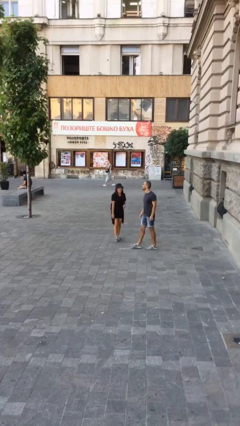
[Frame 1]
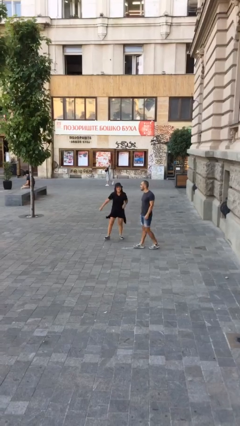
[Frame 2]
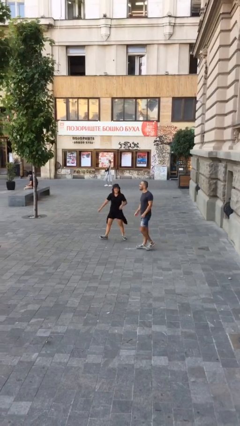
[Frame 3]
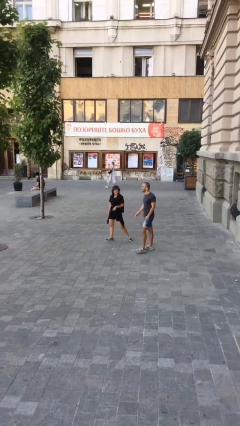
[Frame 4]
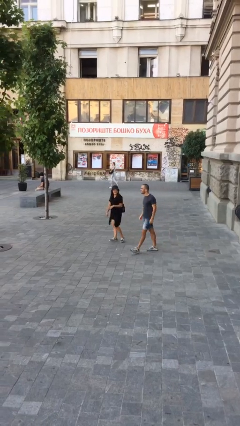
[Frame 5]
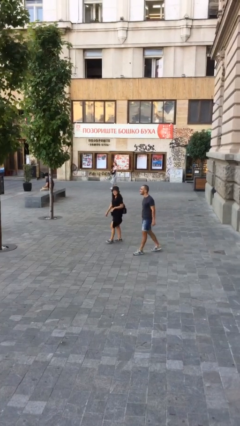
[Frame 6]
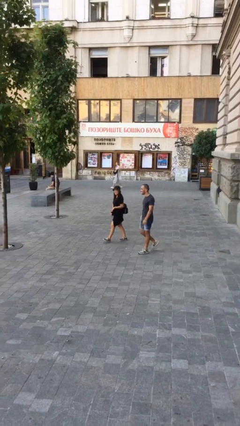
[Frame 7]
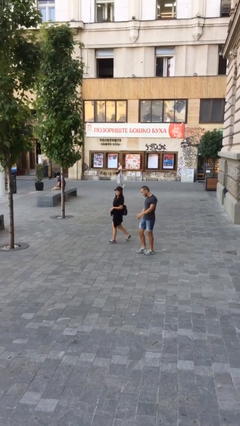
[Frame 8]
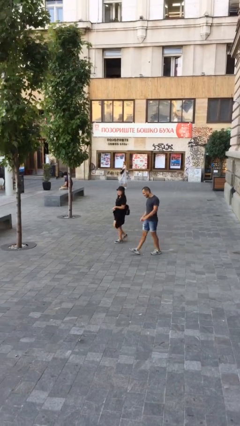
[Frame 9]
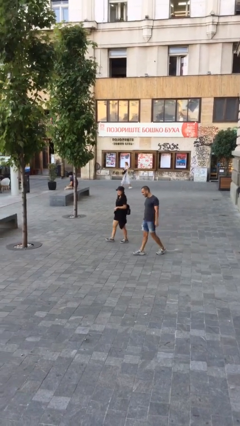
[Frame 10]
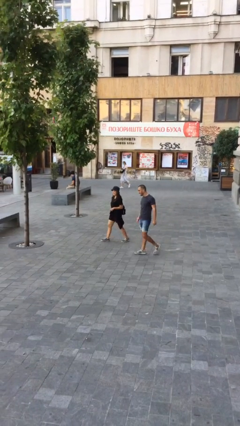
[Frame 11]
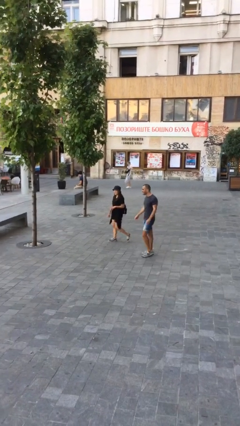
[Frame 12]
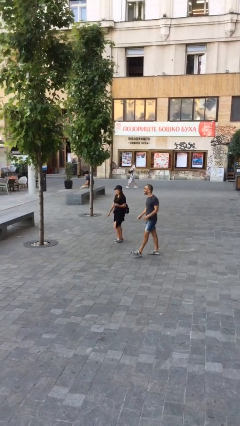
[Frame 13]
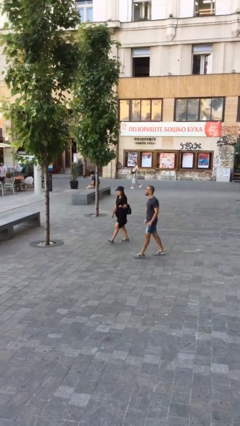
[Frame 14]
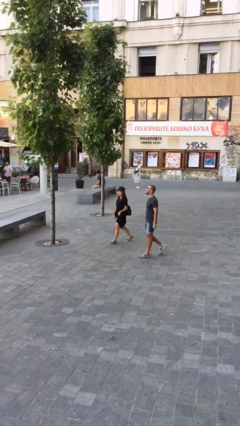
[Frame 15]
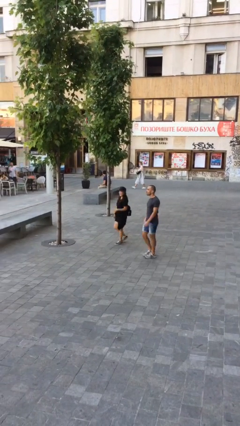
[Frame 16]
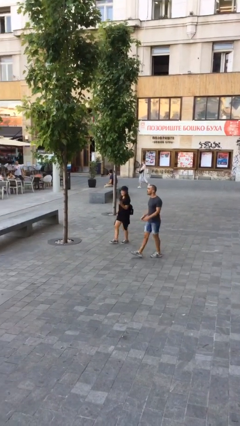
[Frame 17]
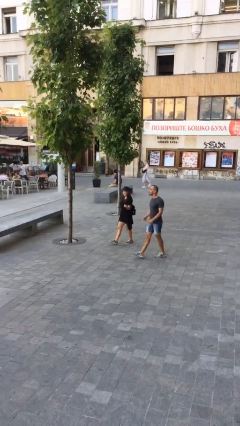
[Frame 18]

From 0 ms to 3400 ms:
person talks to person

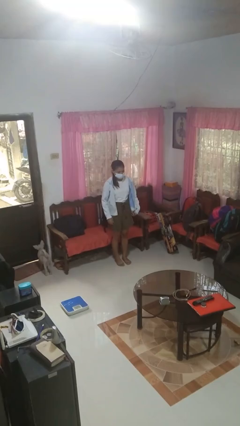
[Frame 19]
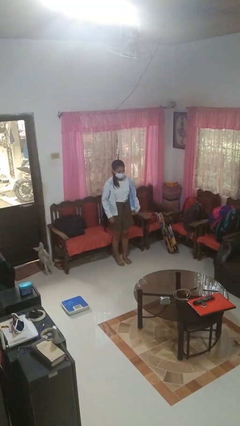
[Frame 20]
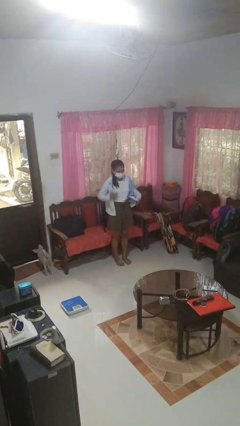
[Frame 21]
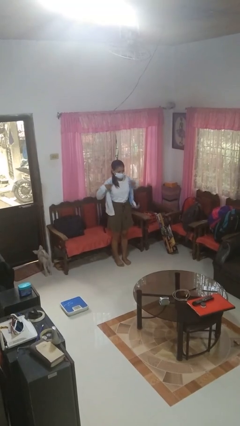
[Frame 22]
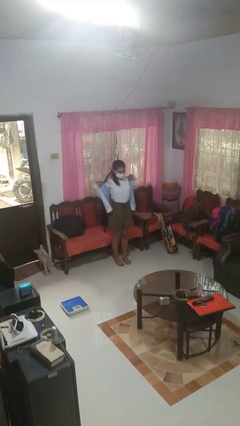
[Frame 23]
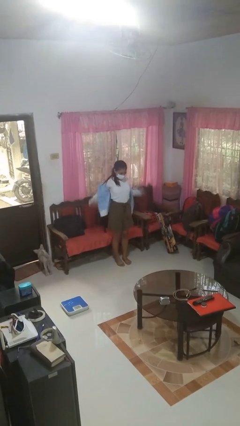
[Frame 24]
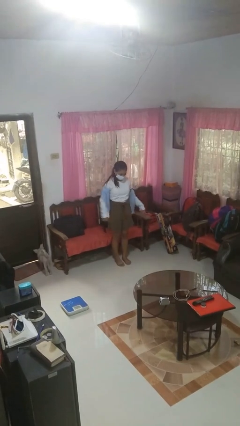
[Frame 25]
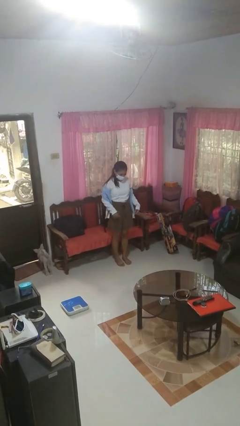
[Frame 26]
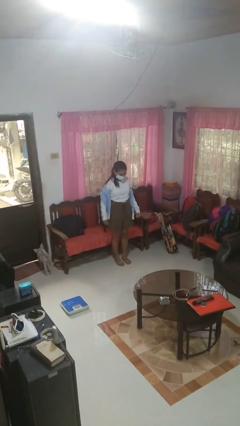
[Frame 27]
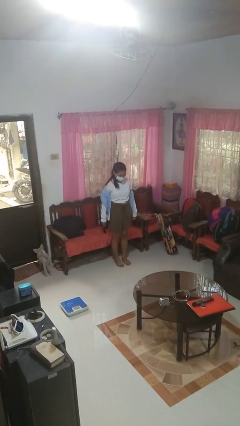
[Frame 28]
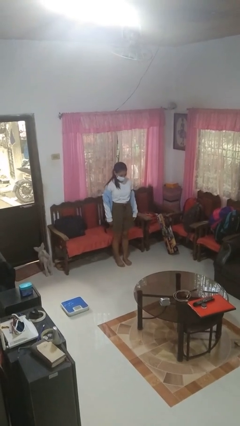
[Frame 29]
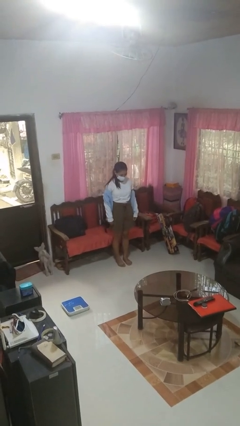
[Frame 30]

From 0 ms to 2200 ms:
person takes off jacket

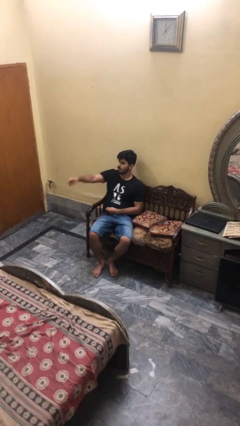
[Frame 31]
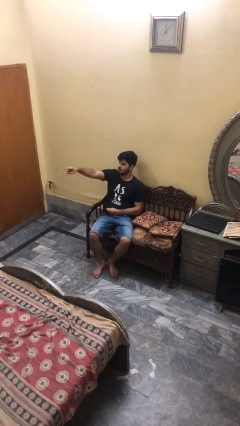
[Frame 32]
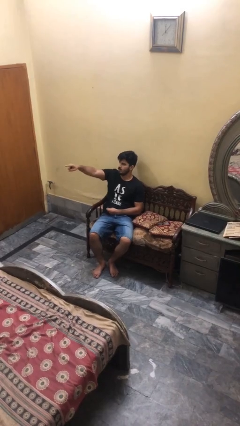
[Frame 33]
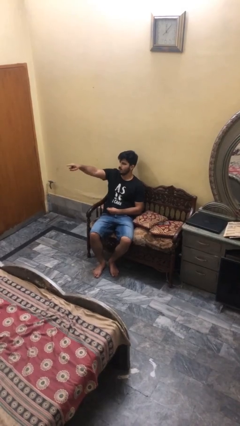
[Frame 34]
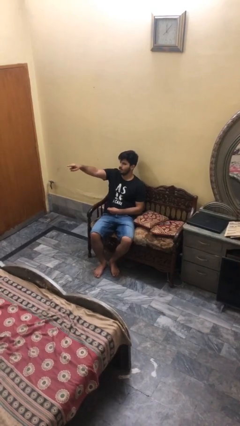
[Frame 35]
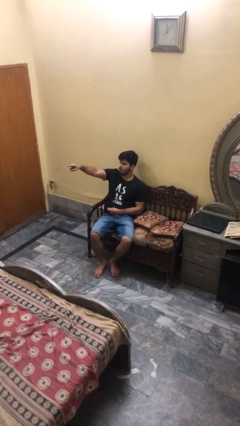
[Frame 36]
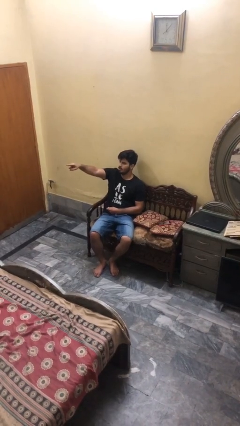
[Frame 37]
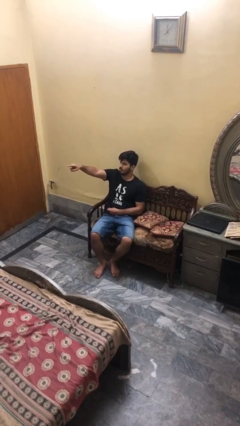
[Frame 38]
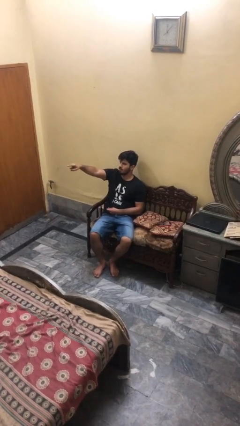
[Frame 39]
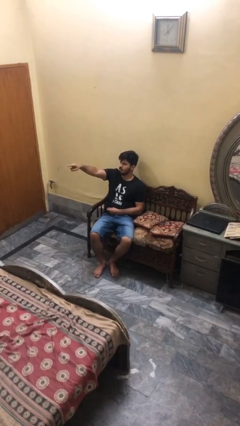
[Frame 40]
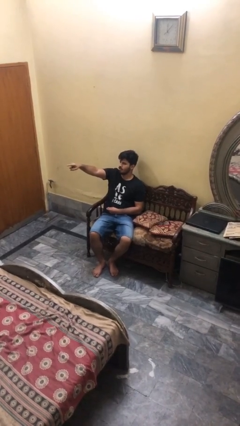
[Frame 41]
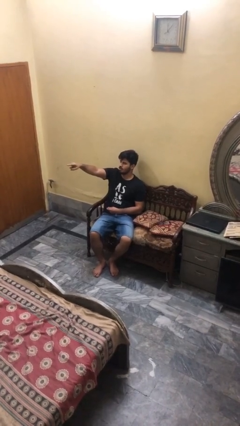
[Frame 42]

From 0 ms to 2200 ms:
person points at person

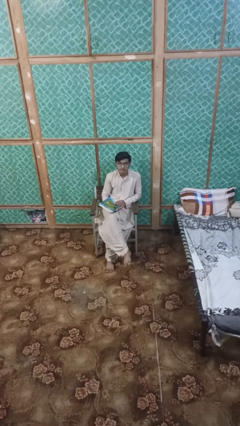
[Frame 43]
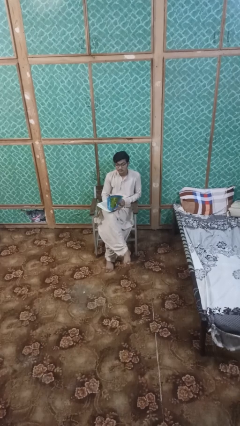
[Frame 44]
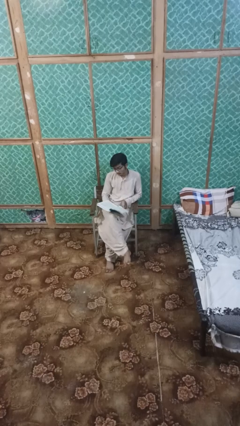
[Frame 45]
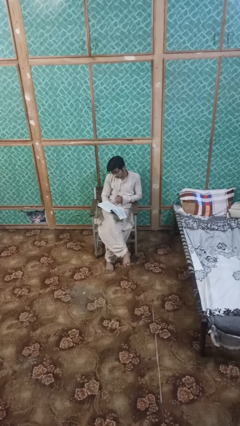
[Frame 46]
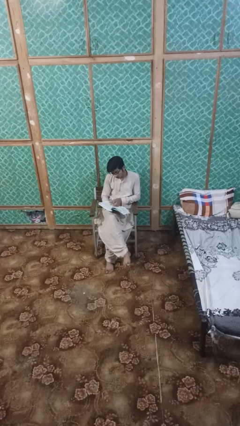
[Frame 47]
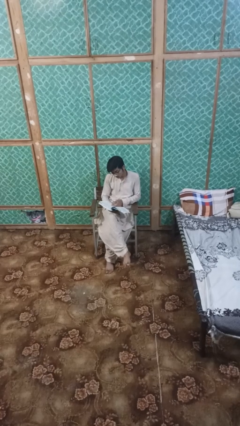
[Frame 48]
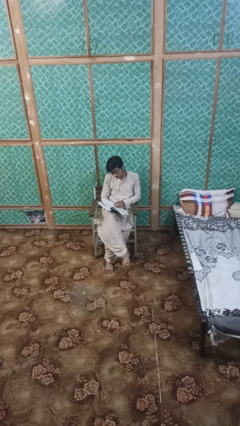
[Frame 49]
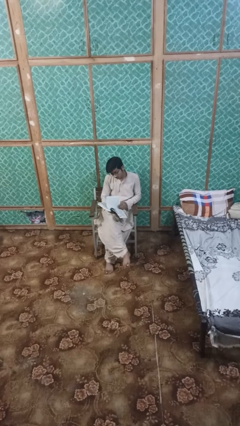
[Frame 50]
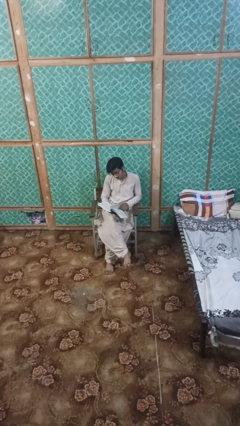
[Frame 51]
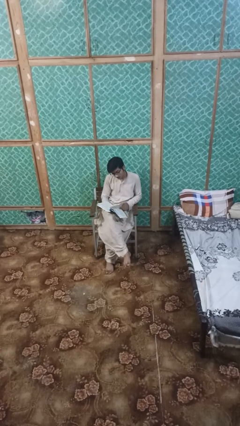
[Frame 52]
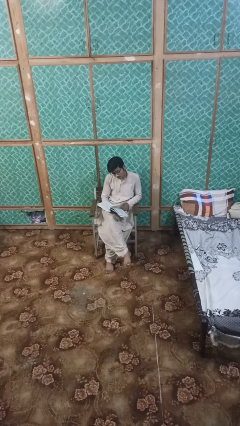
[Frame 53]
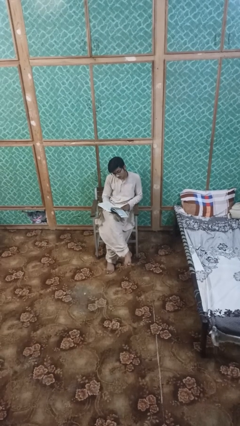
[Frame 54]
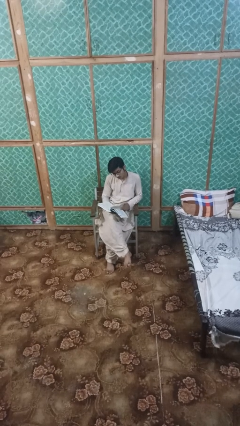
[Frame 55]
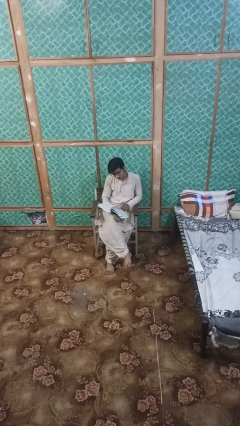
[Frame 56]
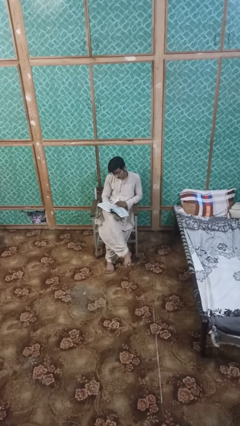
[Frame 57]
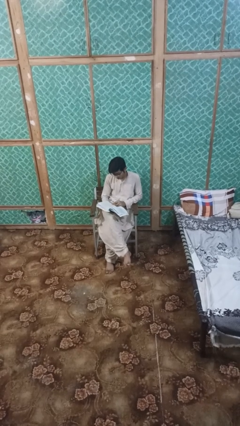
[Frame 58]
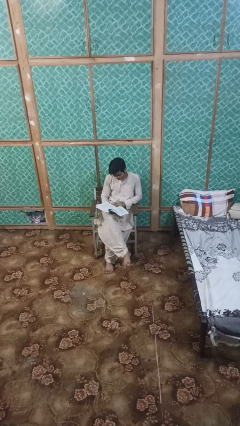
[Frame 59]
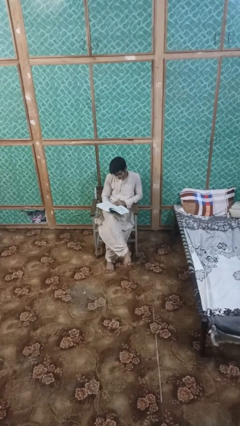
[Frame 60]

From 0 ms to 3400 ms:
person reads book

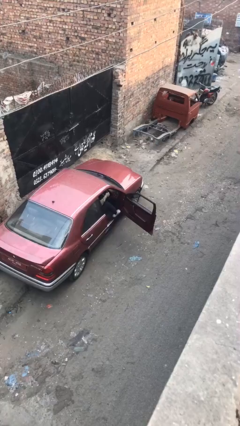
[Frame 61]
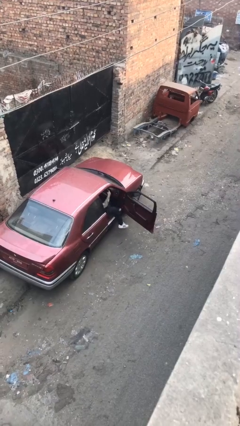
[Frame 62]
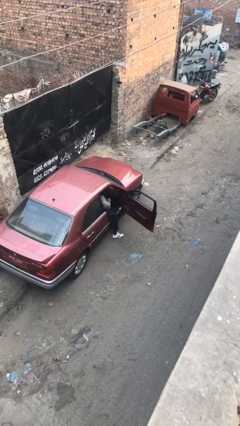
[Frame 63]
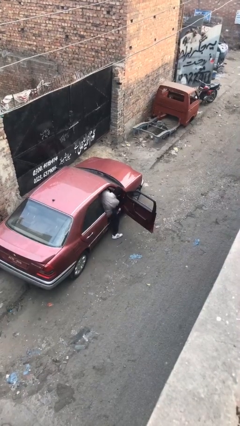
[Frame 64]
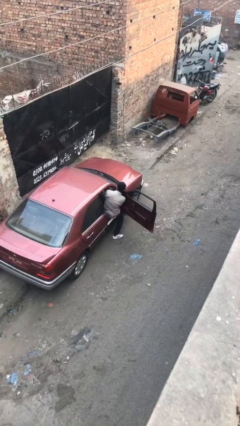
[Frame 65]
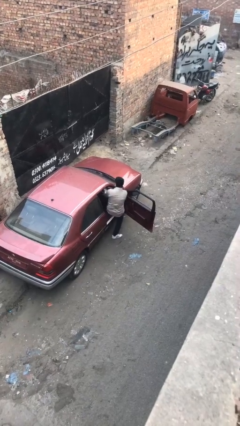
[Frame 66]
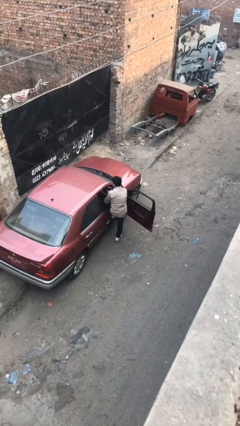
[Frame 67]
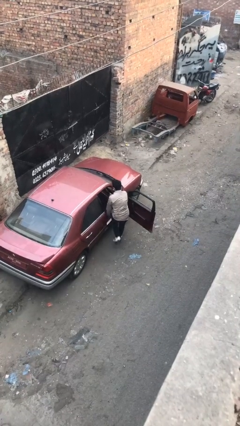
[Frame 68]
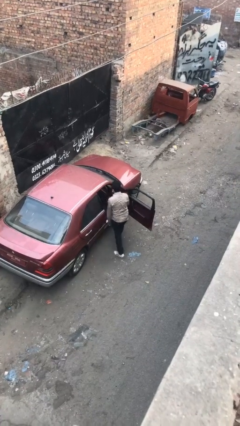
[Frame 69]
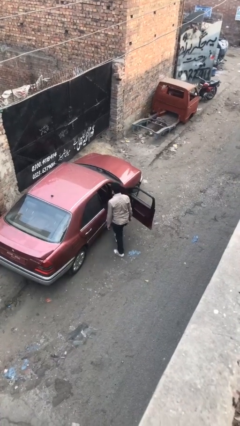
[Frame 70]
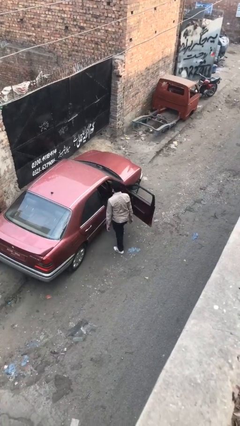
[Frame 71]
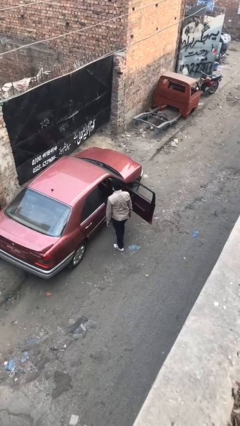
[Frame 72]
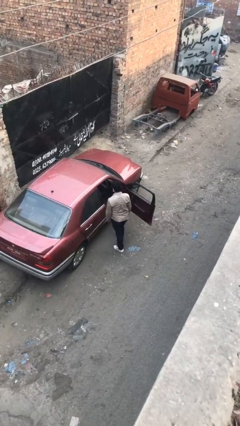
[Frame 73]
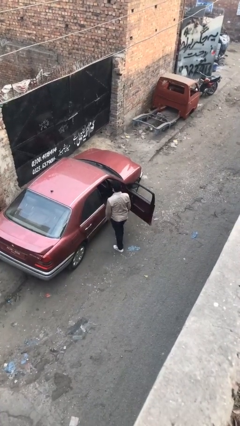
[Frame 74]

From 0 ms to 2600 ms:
person exits car

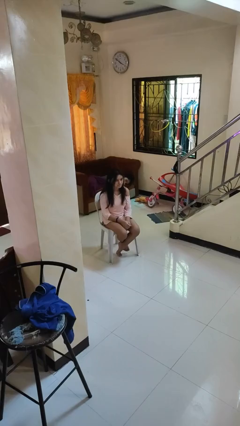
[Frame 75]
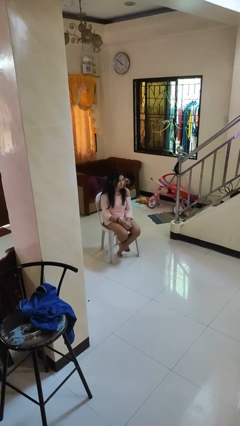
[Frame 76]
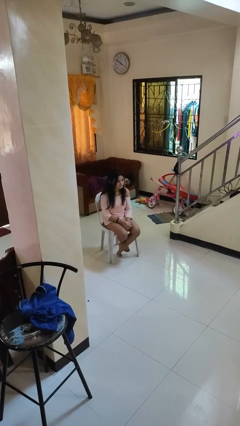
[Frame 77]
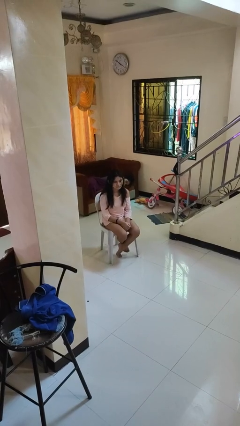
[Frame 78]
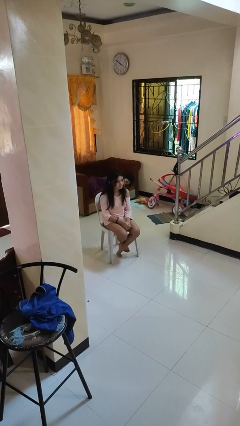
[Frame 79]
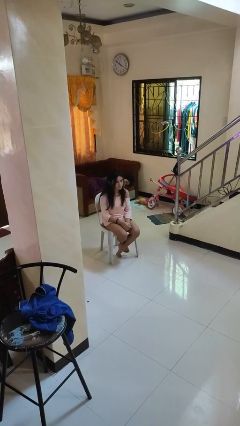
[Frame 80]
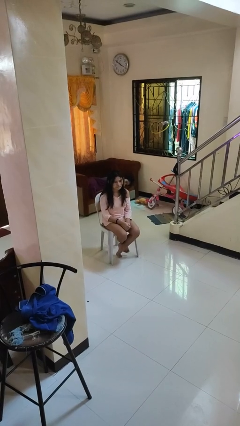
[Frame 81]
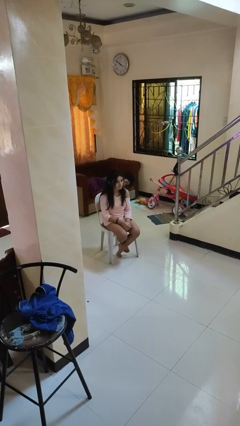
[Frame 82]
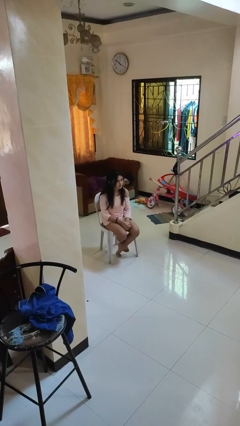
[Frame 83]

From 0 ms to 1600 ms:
person shakes head

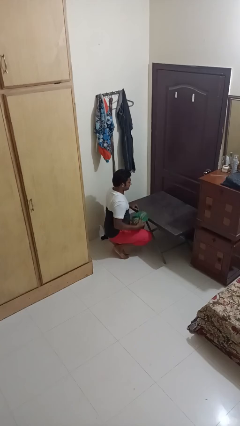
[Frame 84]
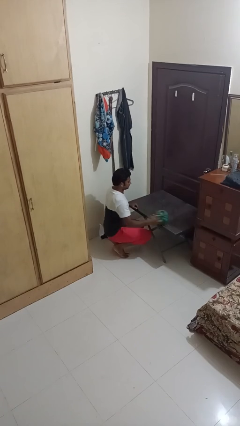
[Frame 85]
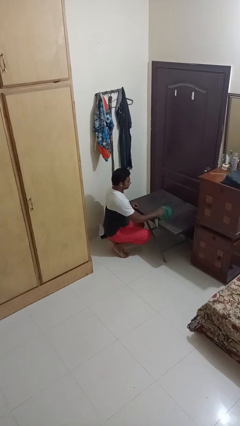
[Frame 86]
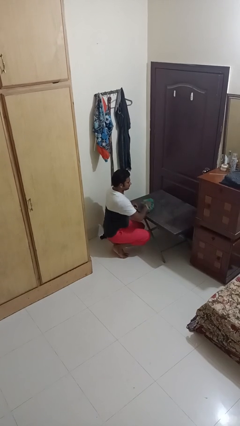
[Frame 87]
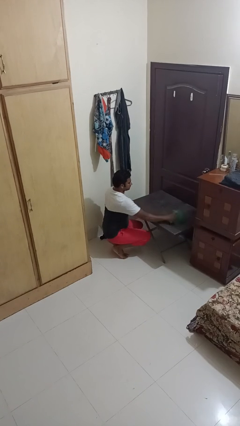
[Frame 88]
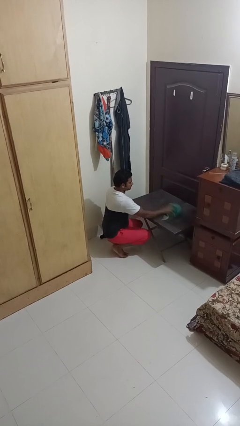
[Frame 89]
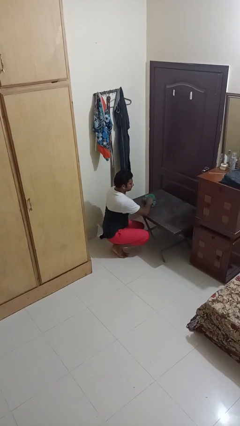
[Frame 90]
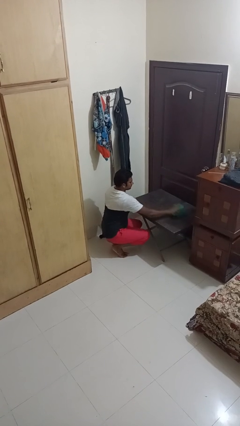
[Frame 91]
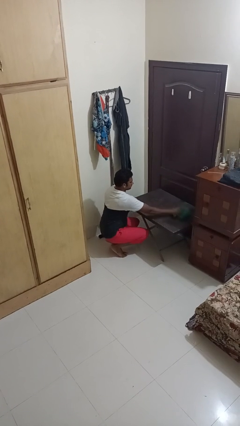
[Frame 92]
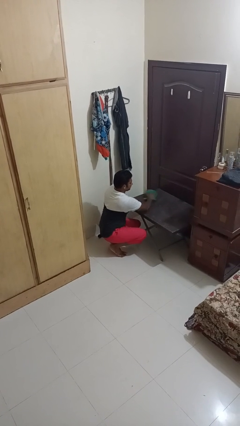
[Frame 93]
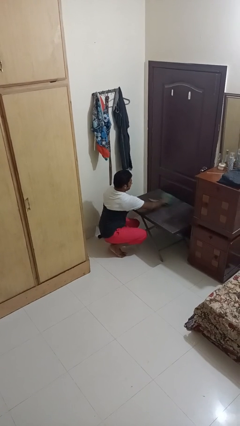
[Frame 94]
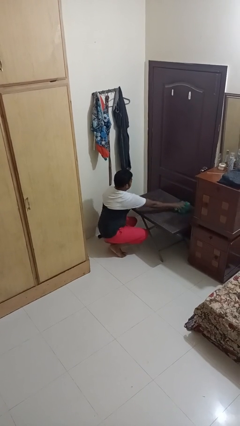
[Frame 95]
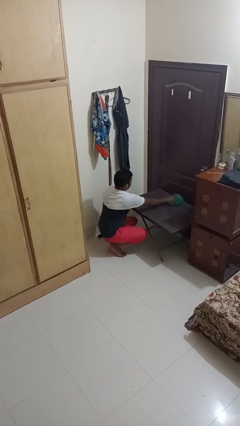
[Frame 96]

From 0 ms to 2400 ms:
person cleans table with rag
